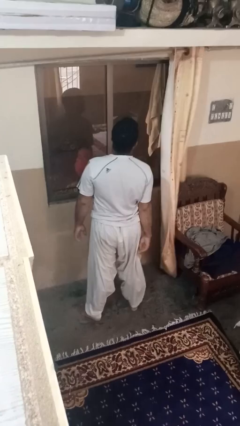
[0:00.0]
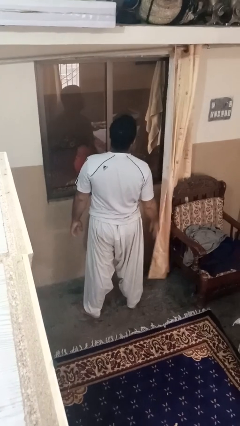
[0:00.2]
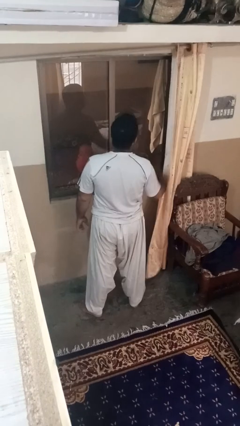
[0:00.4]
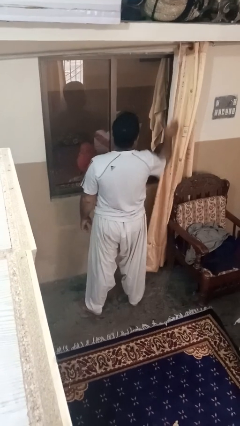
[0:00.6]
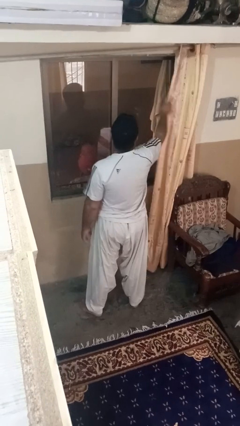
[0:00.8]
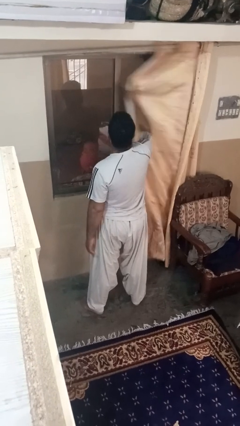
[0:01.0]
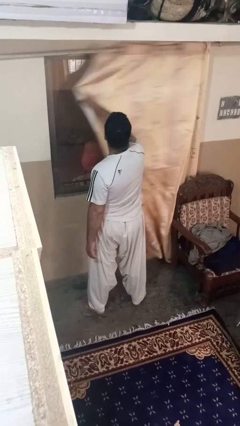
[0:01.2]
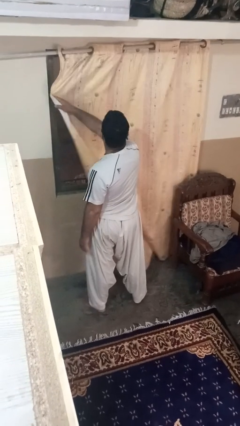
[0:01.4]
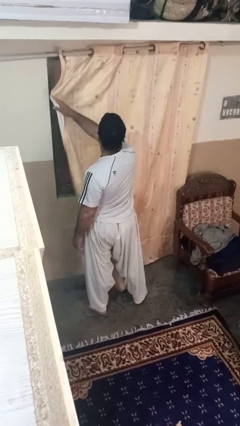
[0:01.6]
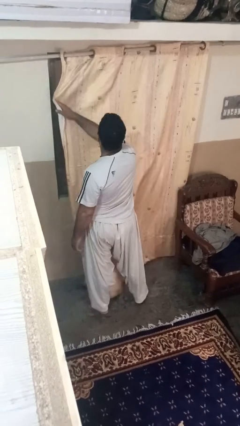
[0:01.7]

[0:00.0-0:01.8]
person closes curtains

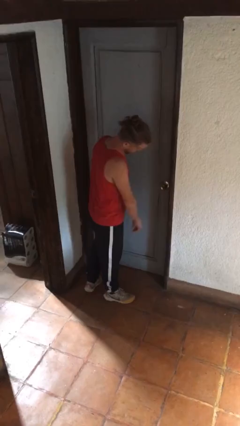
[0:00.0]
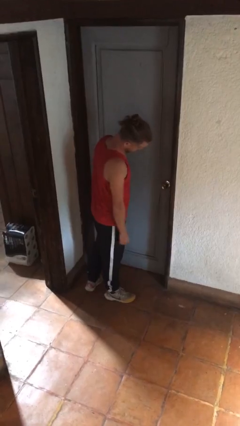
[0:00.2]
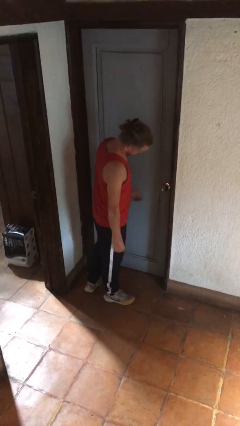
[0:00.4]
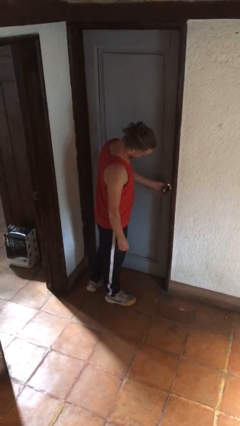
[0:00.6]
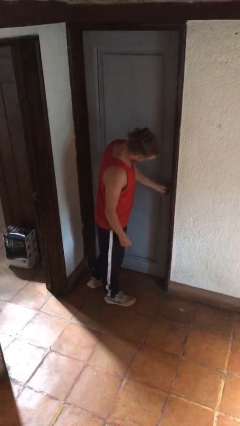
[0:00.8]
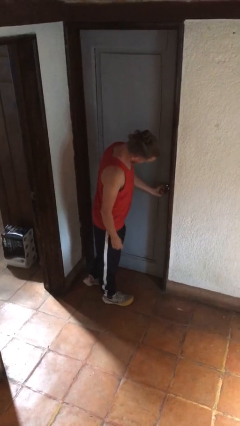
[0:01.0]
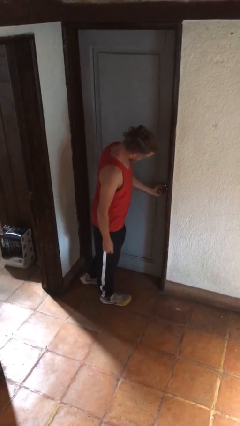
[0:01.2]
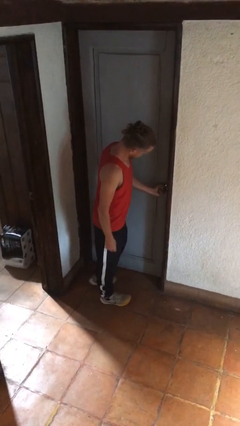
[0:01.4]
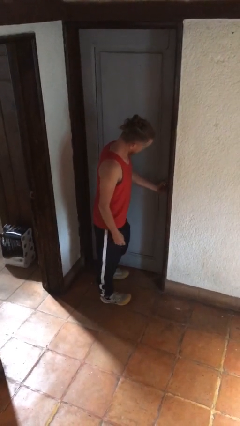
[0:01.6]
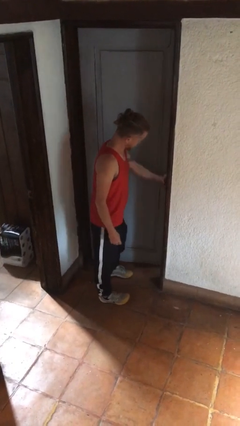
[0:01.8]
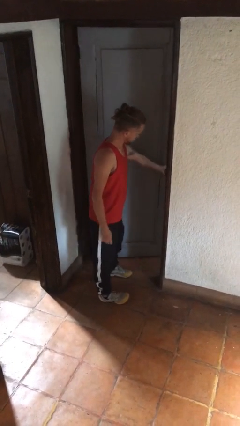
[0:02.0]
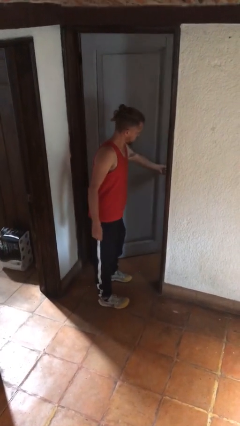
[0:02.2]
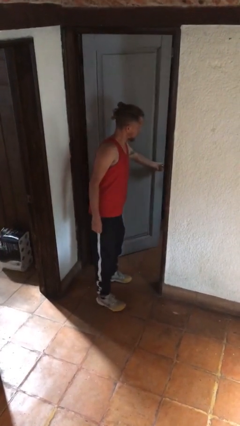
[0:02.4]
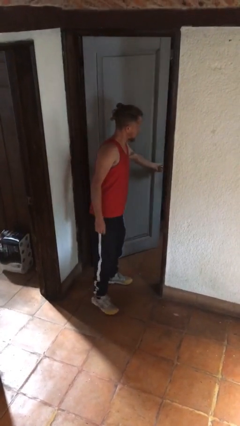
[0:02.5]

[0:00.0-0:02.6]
person opens facility door

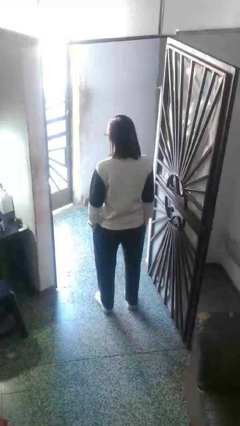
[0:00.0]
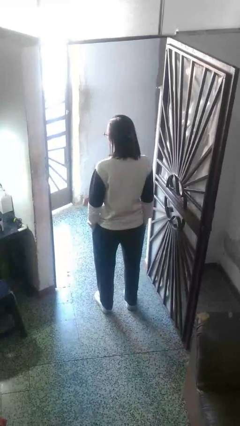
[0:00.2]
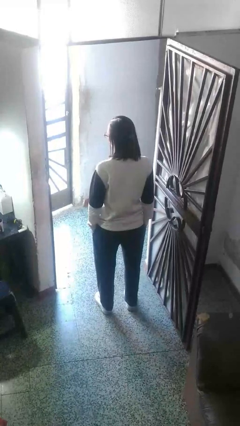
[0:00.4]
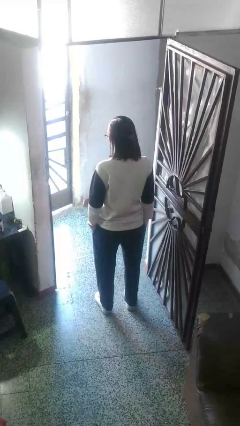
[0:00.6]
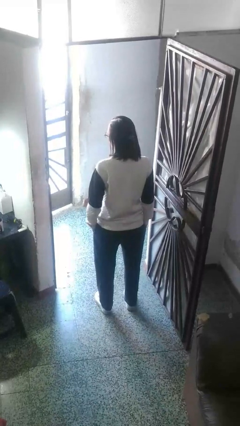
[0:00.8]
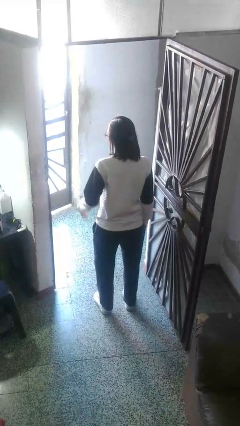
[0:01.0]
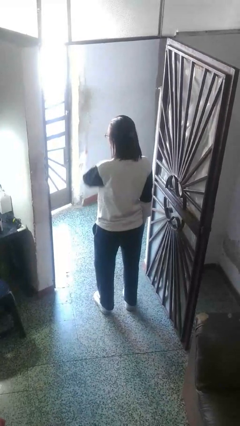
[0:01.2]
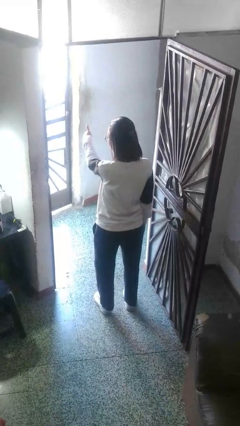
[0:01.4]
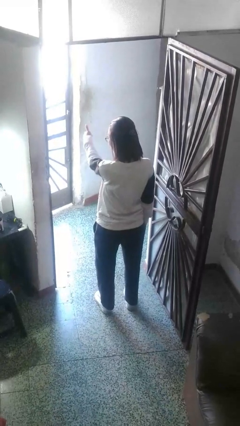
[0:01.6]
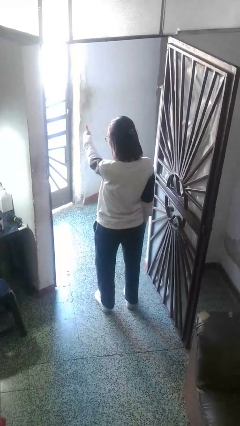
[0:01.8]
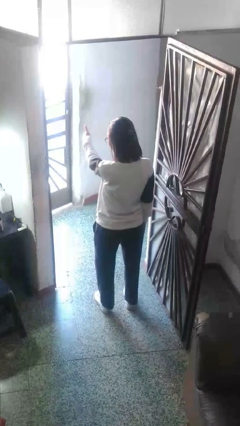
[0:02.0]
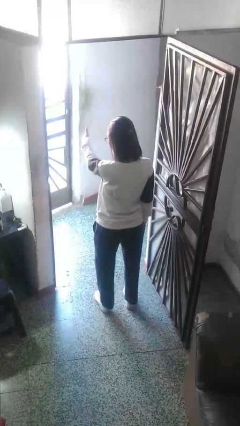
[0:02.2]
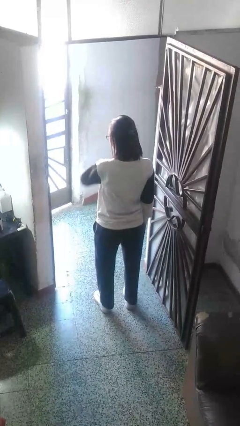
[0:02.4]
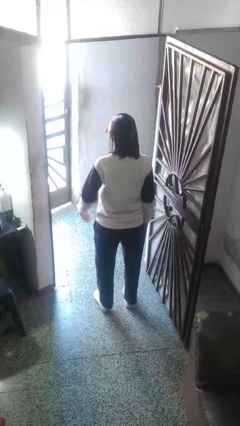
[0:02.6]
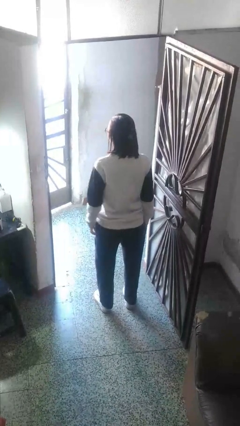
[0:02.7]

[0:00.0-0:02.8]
person gestures thumbs up

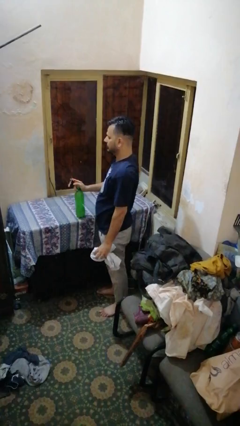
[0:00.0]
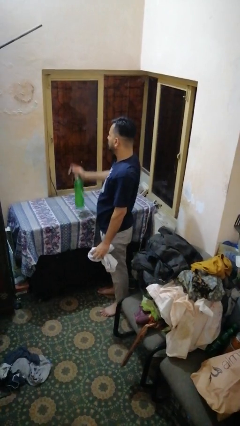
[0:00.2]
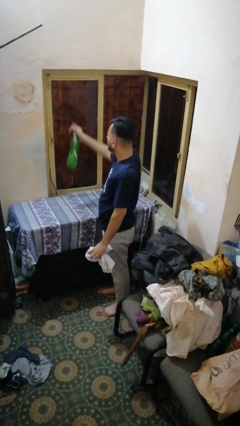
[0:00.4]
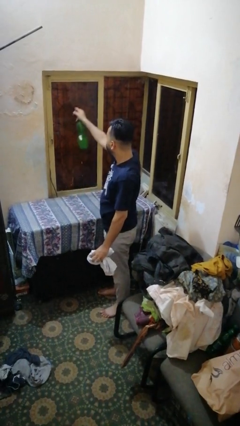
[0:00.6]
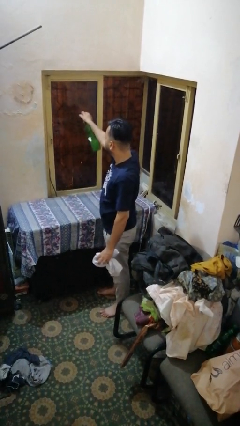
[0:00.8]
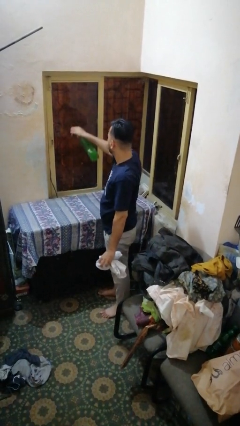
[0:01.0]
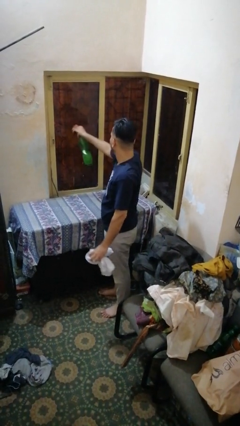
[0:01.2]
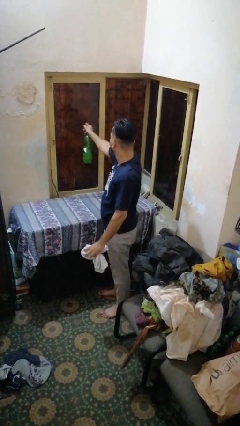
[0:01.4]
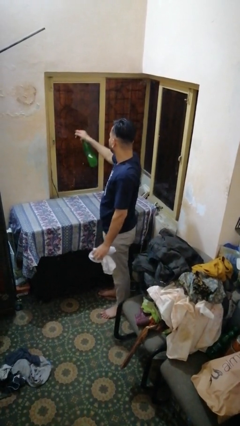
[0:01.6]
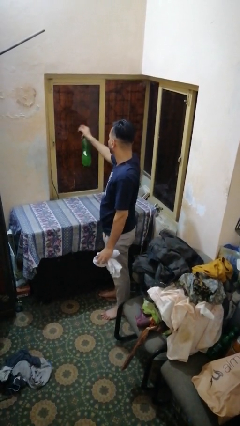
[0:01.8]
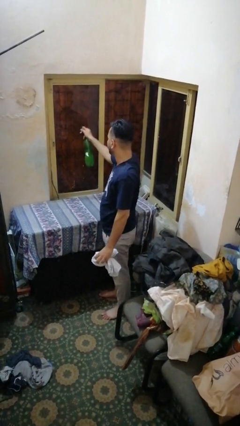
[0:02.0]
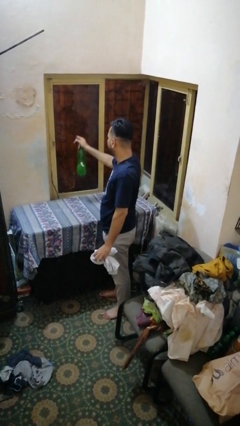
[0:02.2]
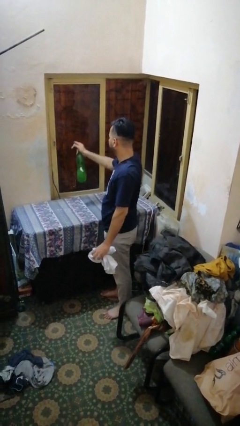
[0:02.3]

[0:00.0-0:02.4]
person sprays from bottle

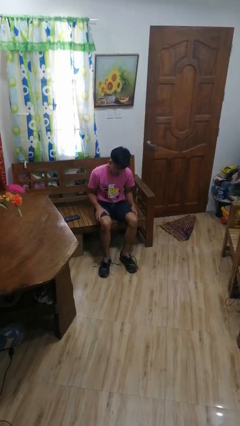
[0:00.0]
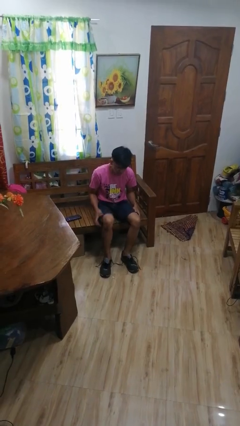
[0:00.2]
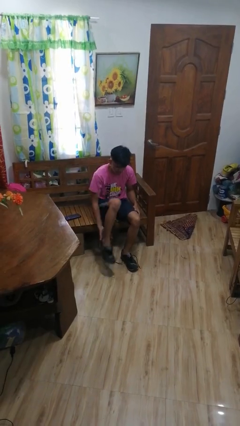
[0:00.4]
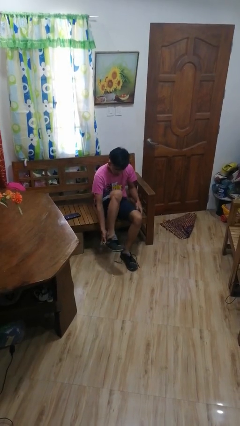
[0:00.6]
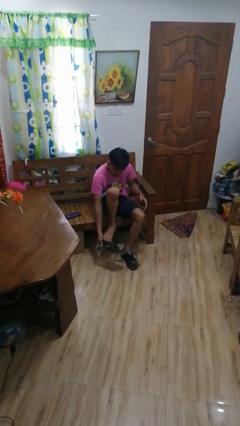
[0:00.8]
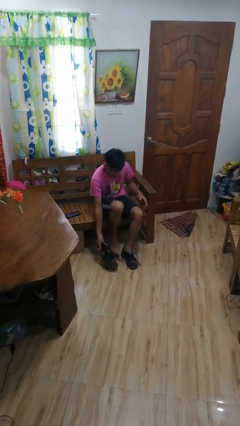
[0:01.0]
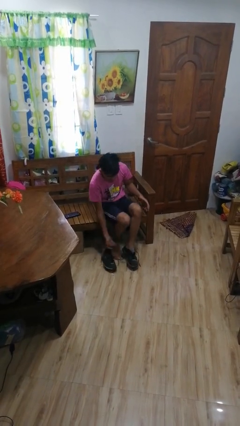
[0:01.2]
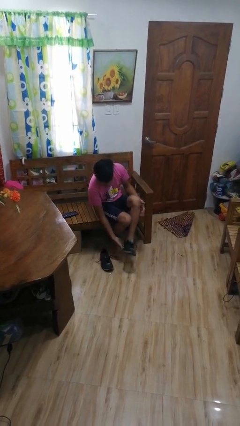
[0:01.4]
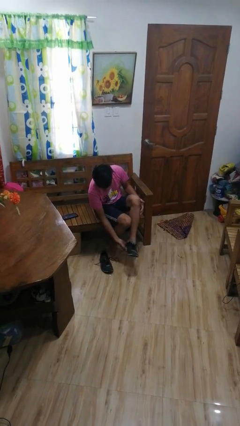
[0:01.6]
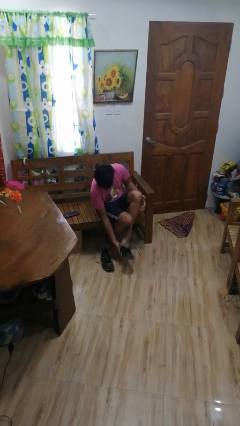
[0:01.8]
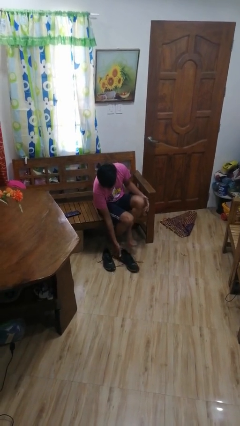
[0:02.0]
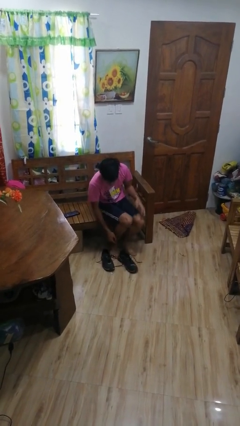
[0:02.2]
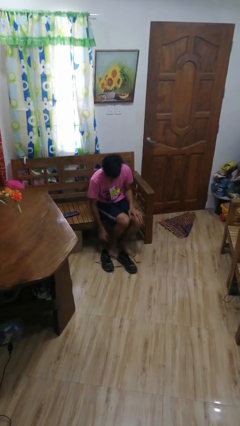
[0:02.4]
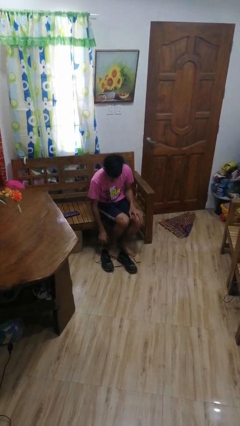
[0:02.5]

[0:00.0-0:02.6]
person takes off shoes

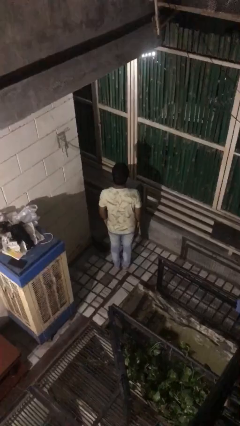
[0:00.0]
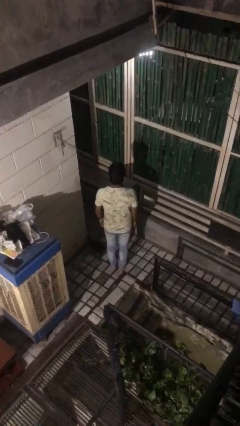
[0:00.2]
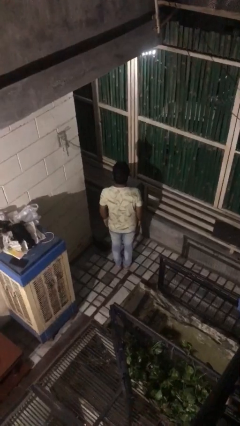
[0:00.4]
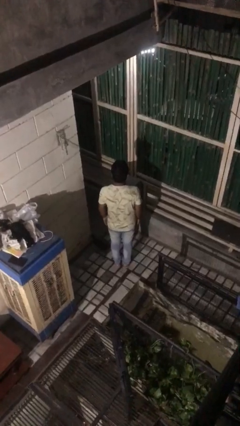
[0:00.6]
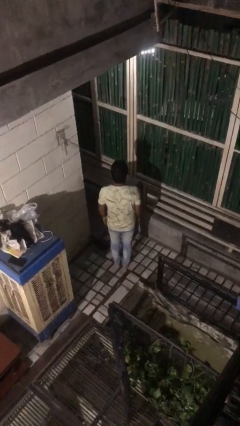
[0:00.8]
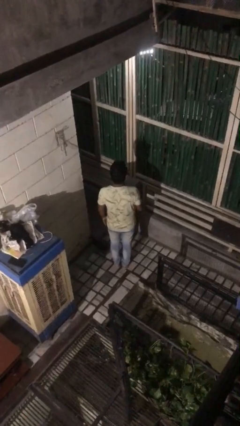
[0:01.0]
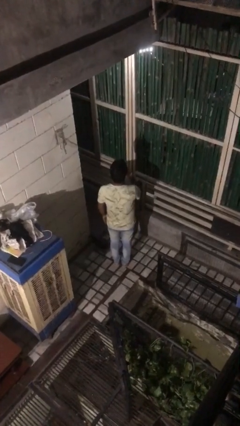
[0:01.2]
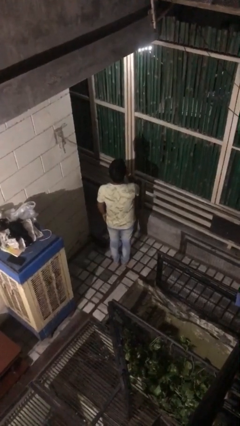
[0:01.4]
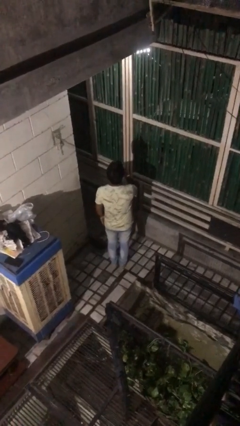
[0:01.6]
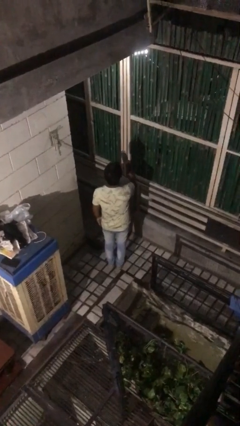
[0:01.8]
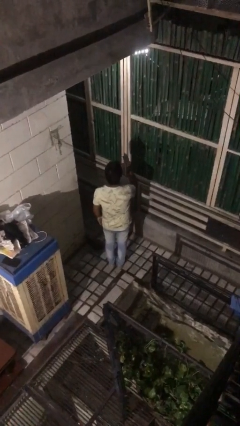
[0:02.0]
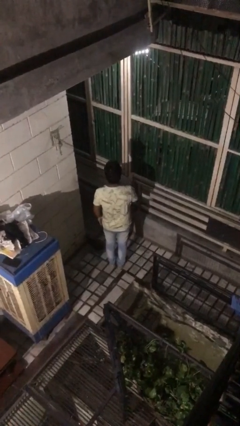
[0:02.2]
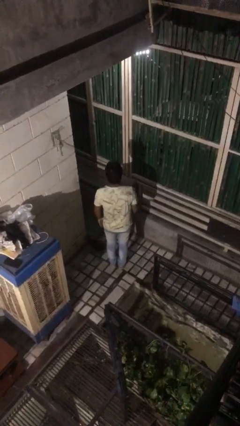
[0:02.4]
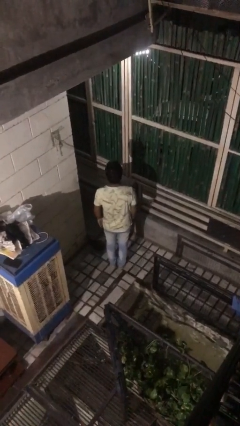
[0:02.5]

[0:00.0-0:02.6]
person gestures blow kiss

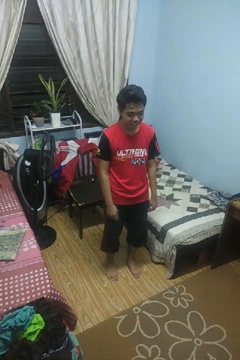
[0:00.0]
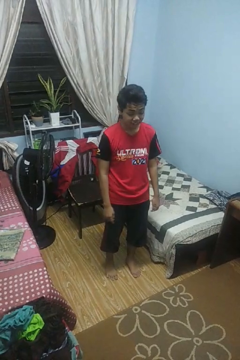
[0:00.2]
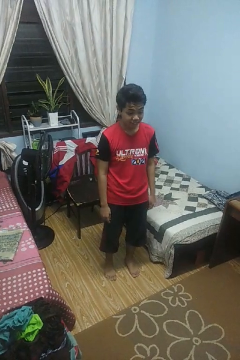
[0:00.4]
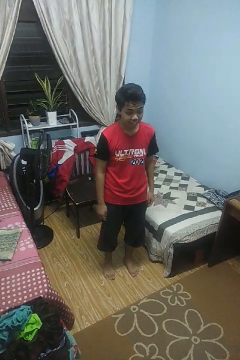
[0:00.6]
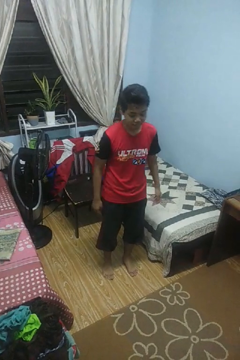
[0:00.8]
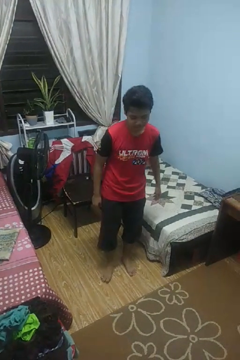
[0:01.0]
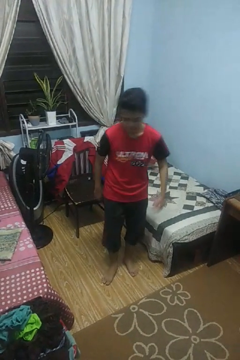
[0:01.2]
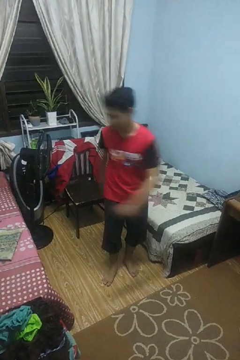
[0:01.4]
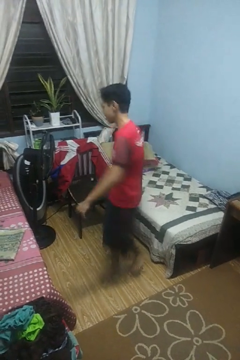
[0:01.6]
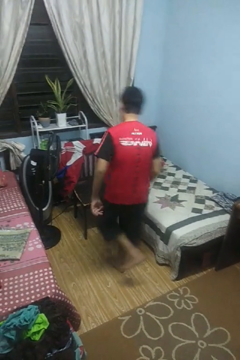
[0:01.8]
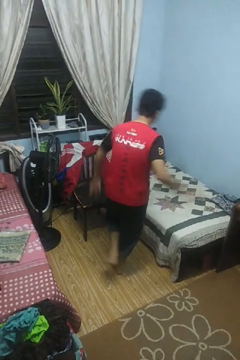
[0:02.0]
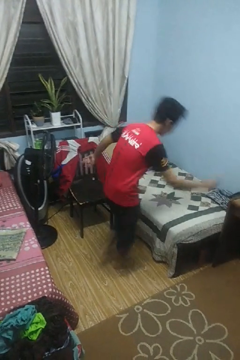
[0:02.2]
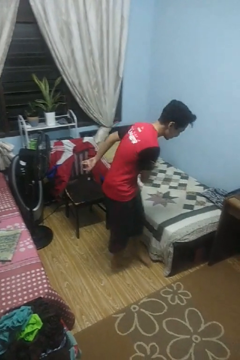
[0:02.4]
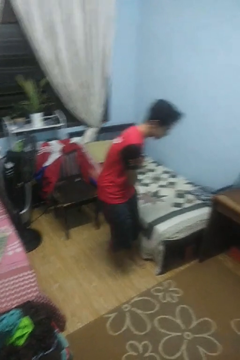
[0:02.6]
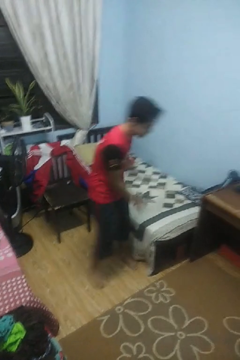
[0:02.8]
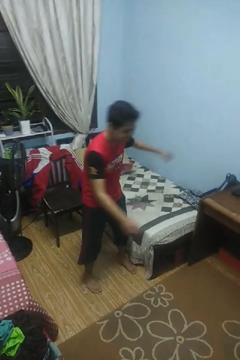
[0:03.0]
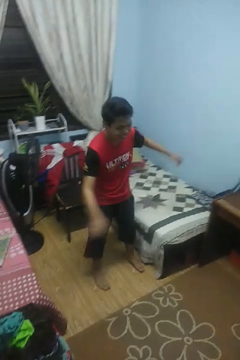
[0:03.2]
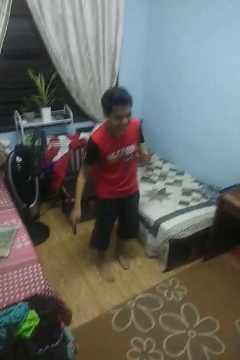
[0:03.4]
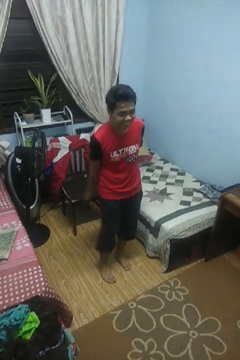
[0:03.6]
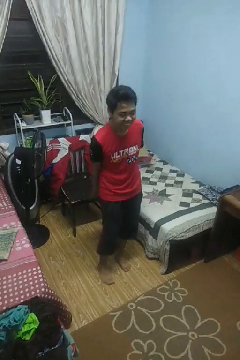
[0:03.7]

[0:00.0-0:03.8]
person twirls
